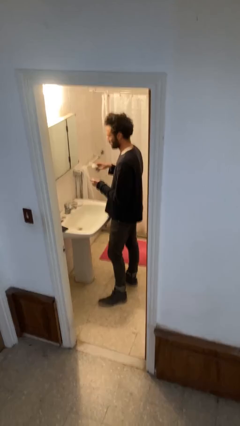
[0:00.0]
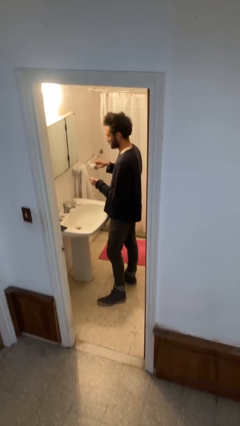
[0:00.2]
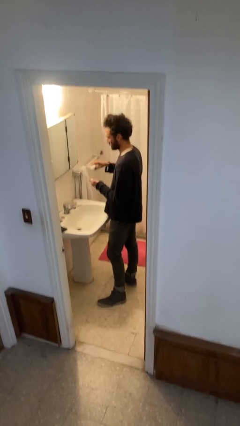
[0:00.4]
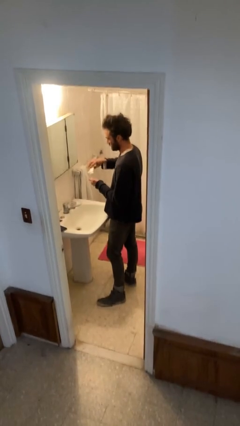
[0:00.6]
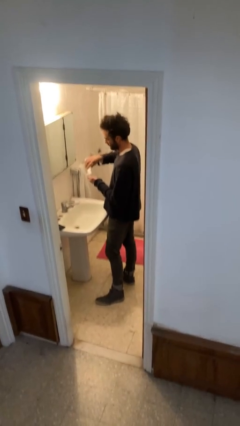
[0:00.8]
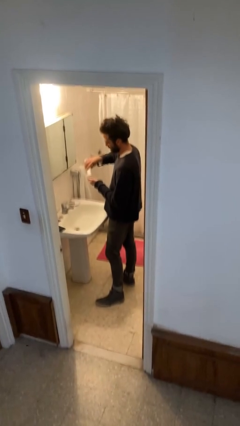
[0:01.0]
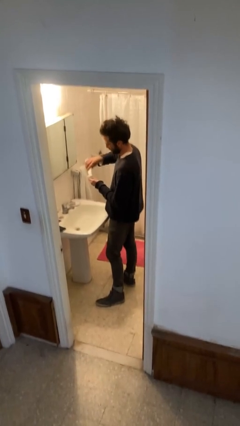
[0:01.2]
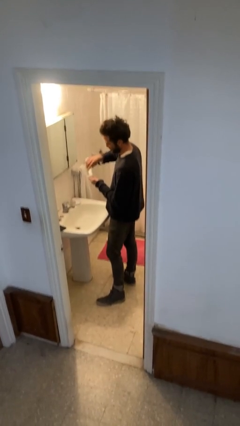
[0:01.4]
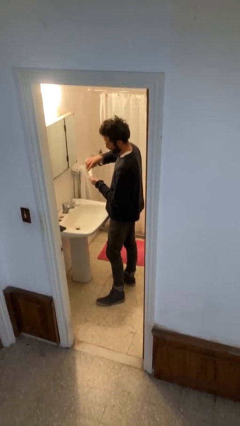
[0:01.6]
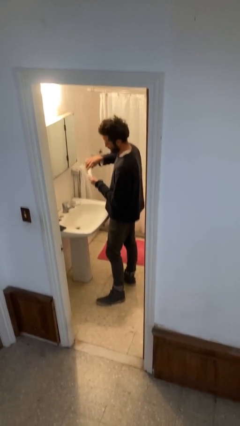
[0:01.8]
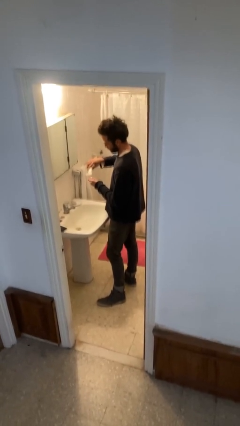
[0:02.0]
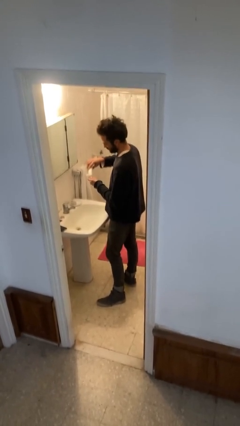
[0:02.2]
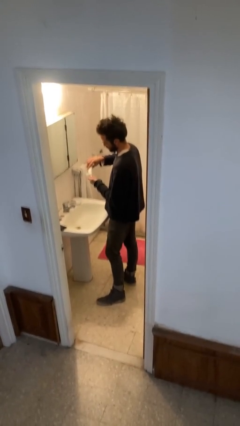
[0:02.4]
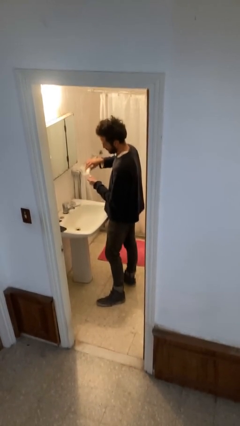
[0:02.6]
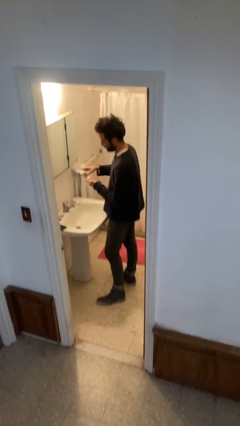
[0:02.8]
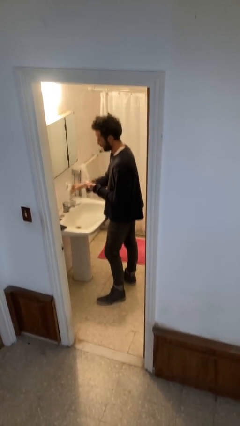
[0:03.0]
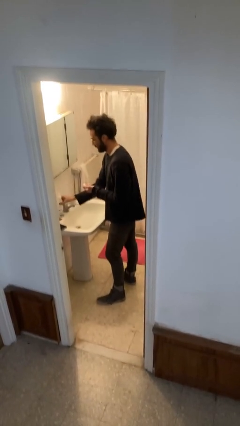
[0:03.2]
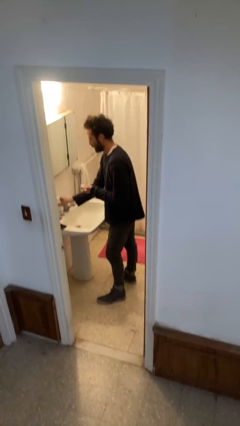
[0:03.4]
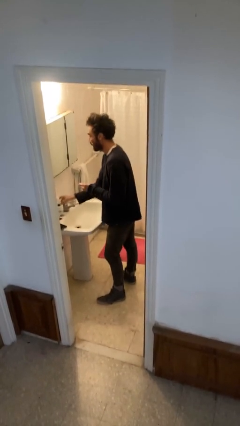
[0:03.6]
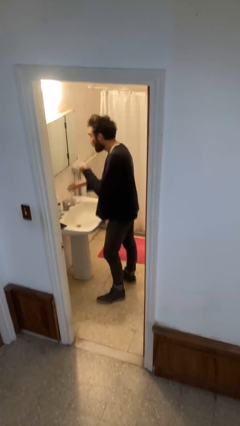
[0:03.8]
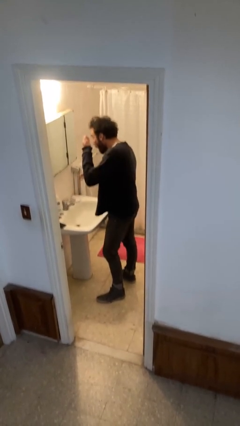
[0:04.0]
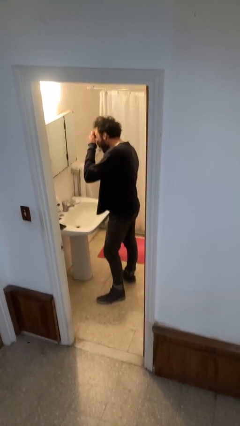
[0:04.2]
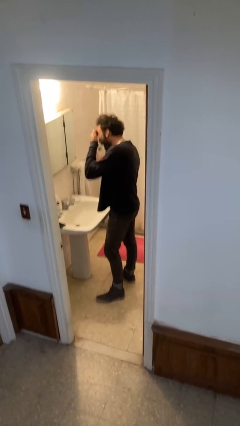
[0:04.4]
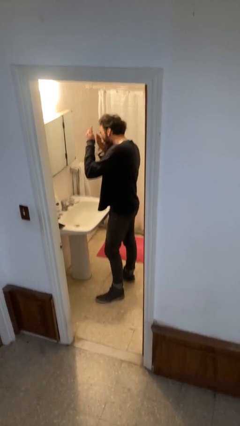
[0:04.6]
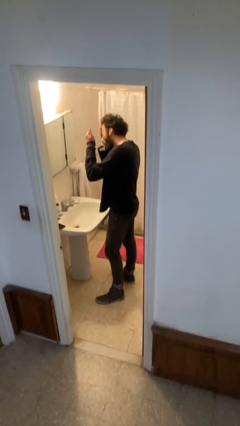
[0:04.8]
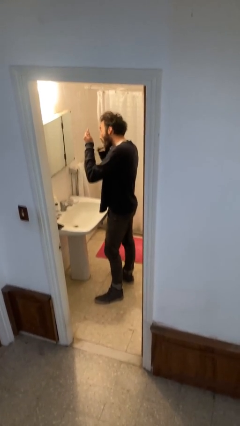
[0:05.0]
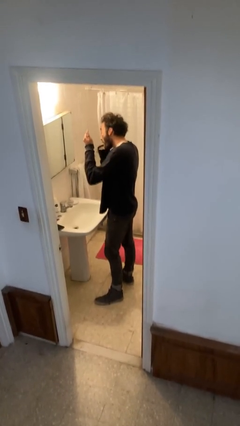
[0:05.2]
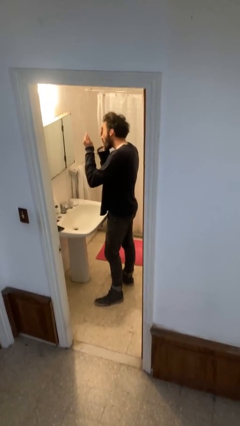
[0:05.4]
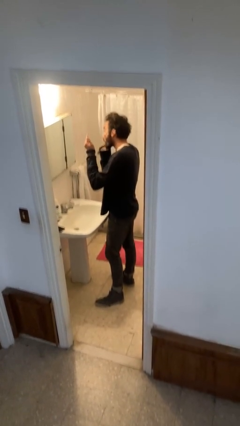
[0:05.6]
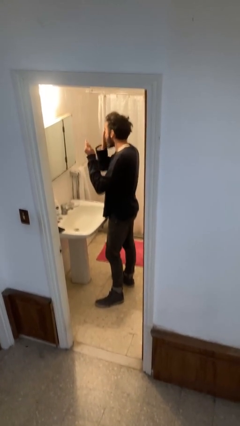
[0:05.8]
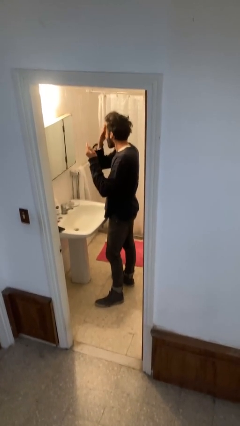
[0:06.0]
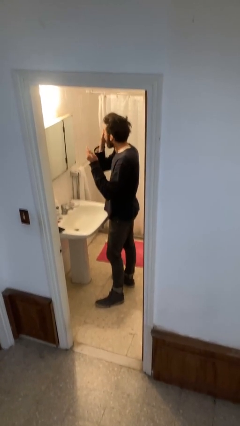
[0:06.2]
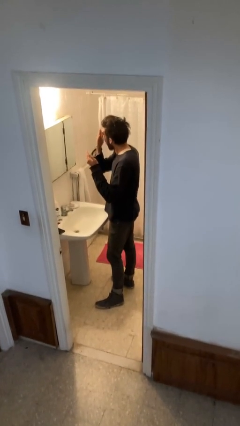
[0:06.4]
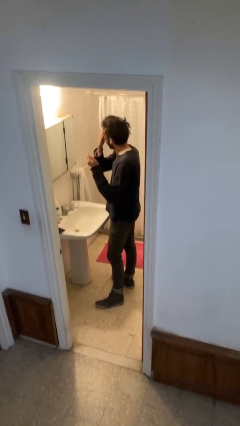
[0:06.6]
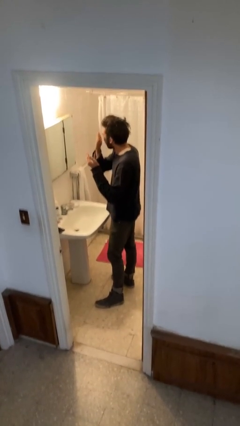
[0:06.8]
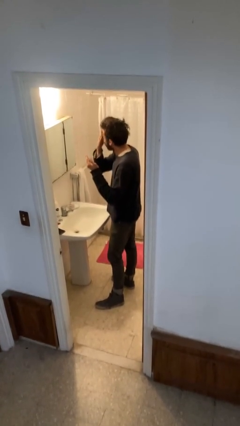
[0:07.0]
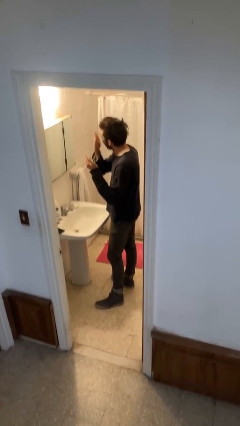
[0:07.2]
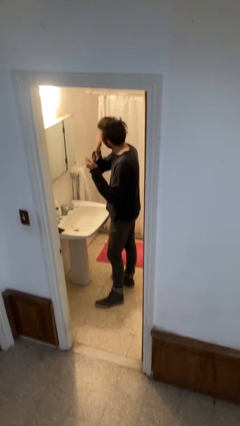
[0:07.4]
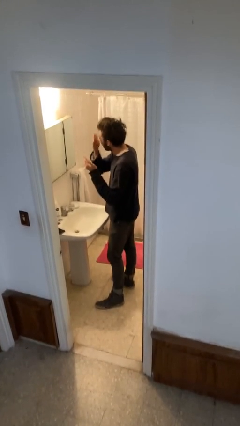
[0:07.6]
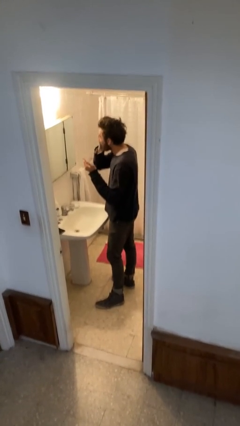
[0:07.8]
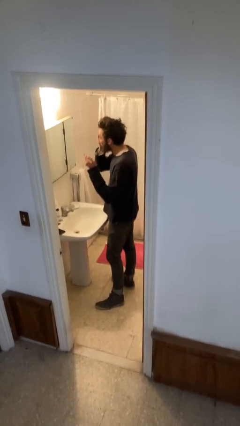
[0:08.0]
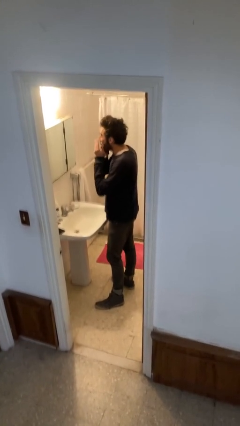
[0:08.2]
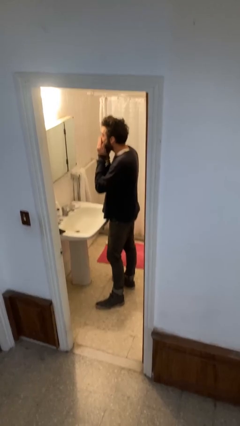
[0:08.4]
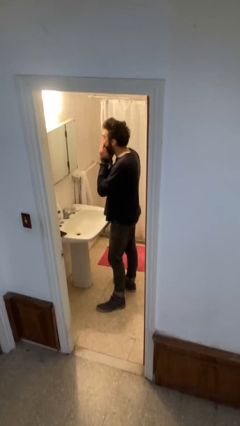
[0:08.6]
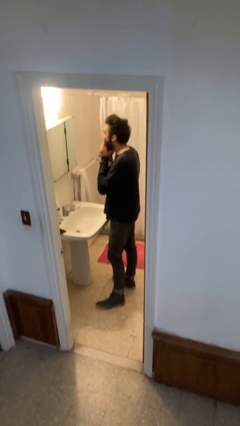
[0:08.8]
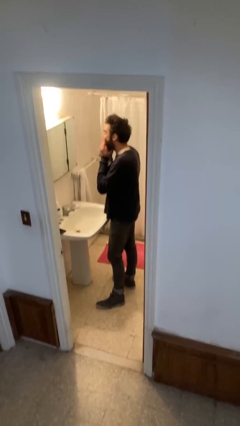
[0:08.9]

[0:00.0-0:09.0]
person applies facial moisturizer

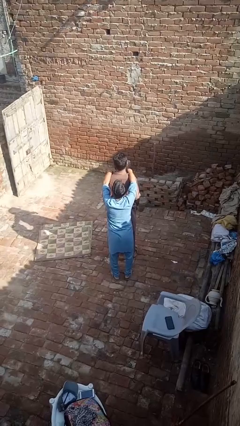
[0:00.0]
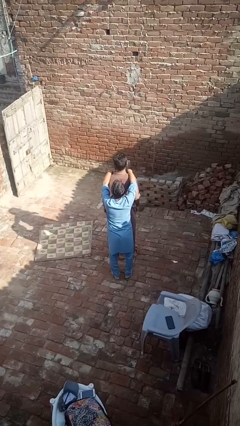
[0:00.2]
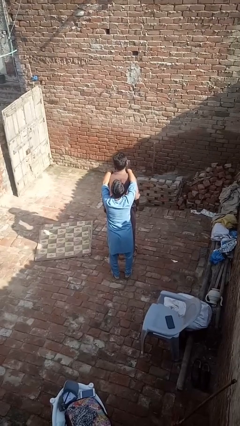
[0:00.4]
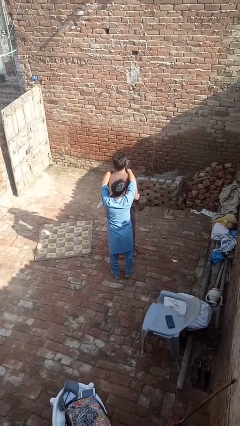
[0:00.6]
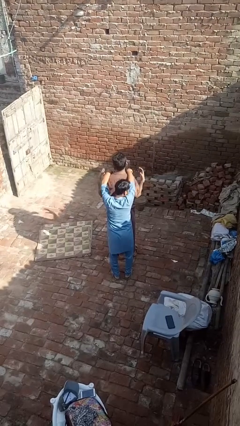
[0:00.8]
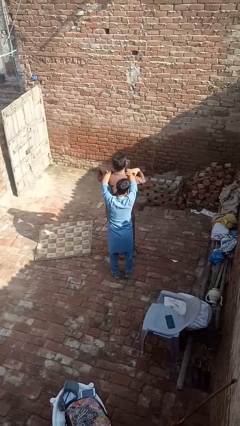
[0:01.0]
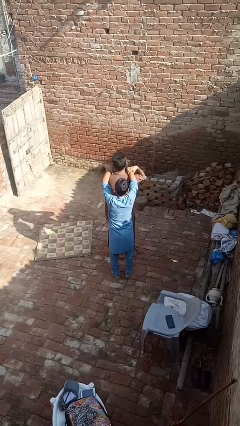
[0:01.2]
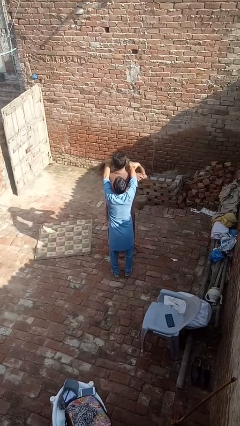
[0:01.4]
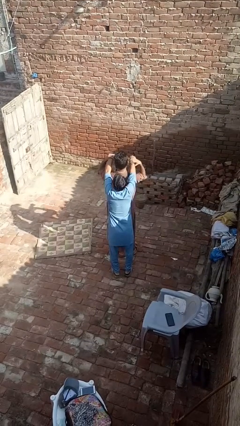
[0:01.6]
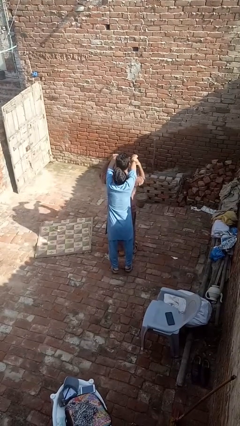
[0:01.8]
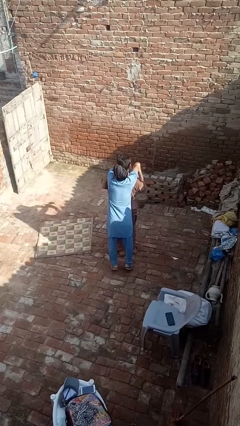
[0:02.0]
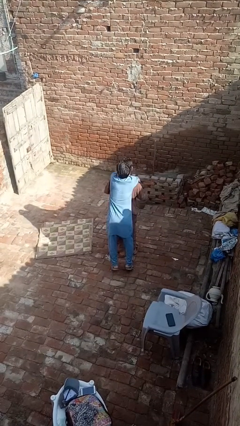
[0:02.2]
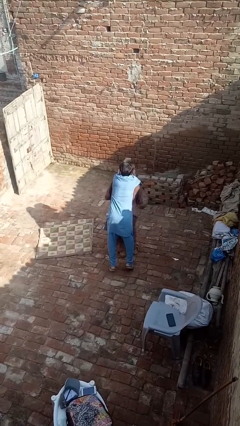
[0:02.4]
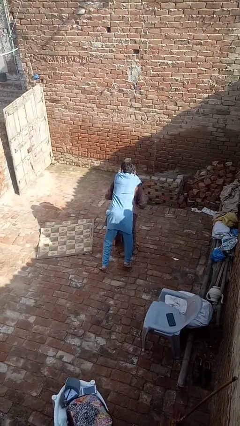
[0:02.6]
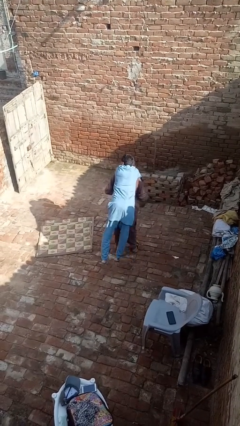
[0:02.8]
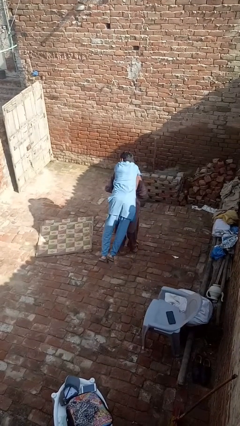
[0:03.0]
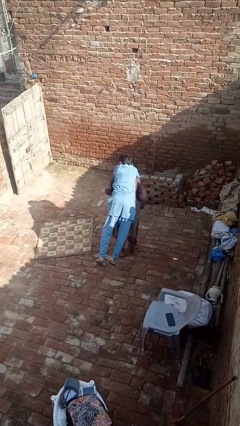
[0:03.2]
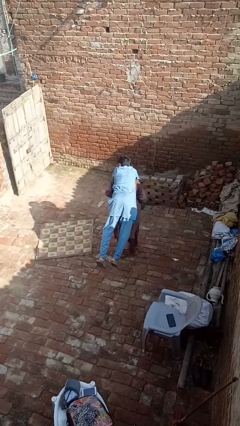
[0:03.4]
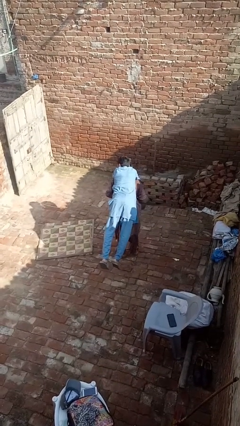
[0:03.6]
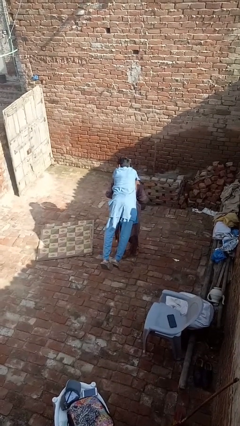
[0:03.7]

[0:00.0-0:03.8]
person carries person over shoulder

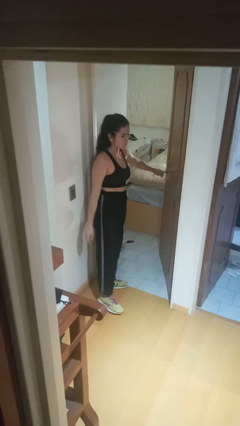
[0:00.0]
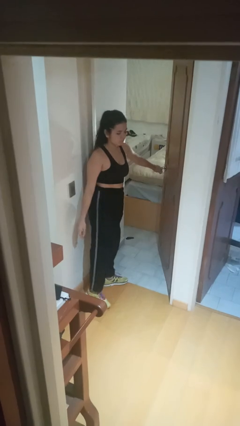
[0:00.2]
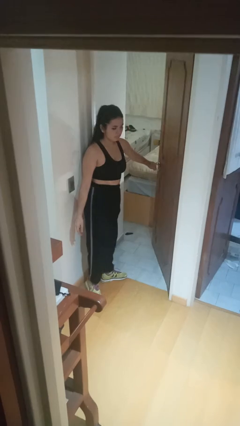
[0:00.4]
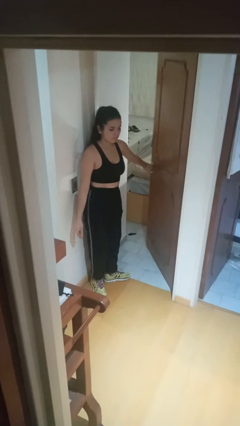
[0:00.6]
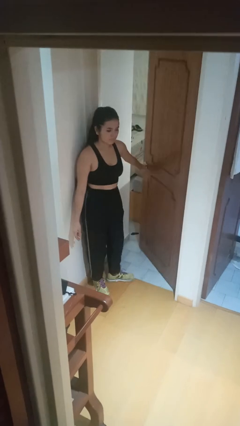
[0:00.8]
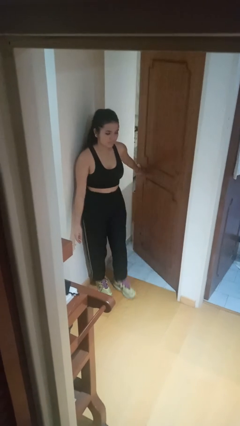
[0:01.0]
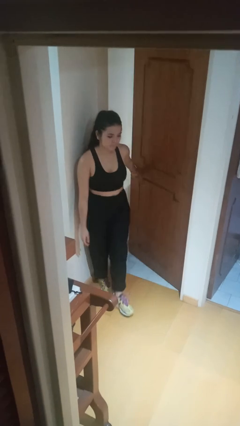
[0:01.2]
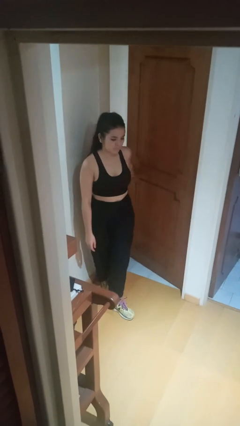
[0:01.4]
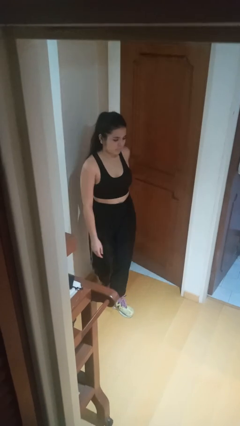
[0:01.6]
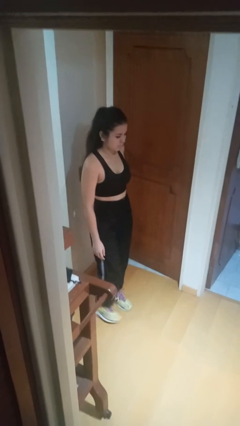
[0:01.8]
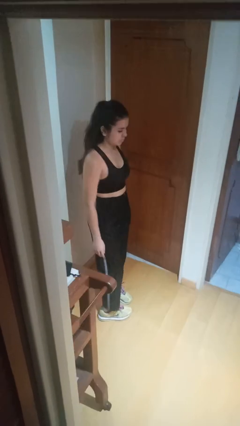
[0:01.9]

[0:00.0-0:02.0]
person closes facility door

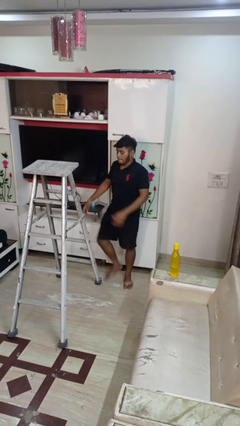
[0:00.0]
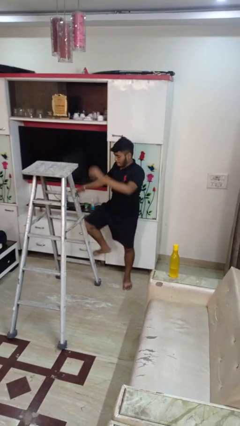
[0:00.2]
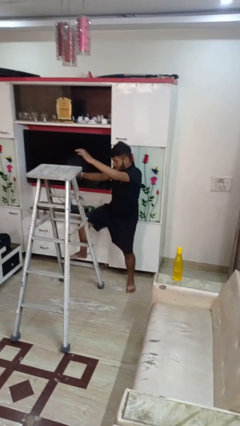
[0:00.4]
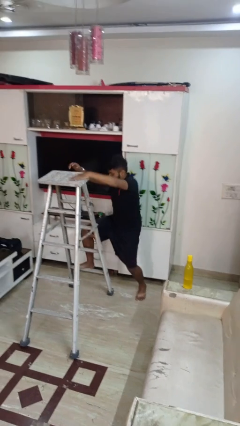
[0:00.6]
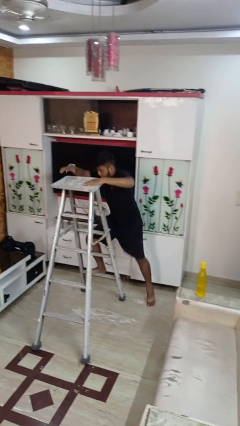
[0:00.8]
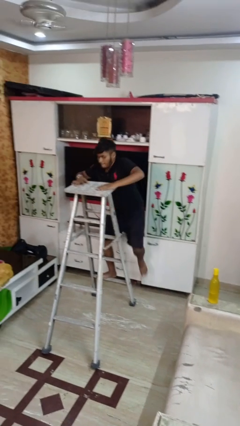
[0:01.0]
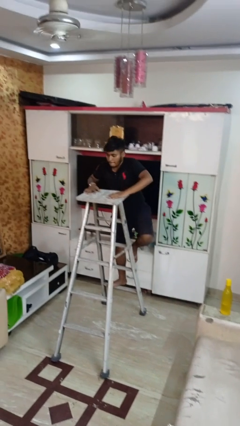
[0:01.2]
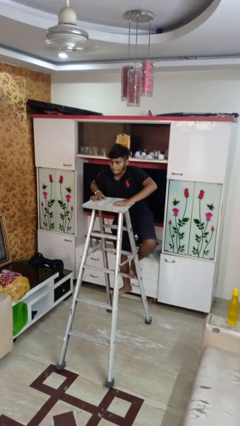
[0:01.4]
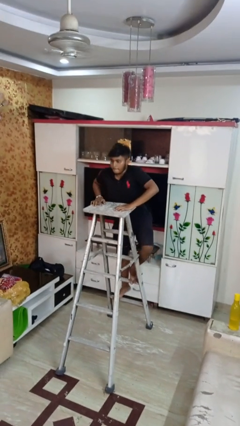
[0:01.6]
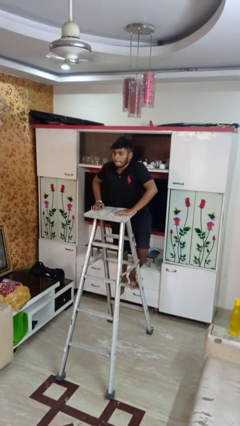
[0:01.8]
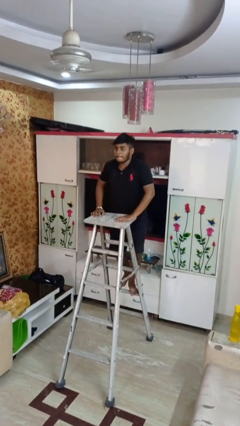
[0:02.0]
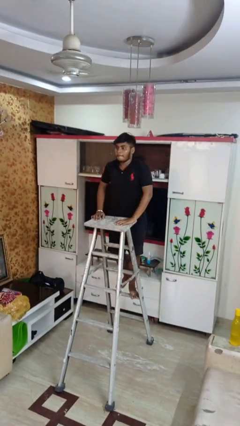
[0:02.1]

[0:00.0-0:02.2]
person climbs up ladder

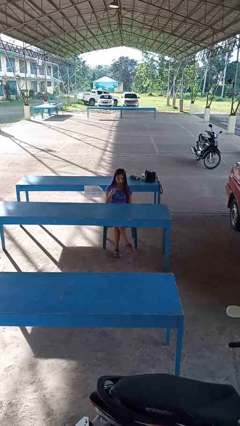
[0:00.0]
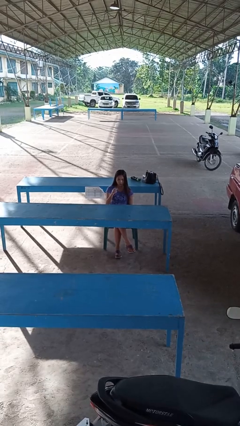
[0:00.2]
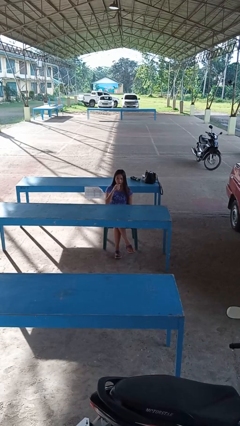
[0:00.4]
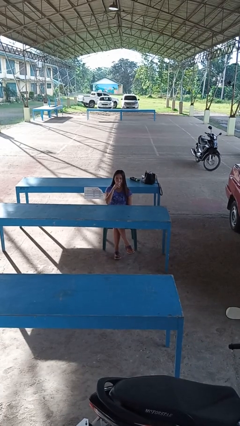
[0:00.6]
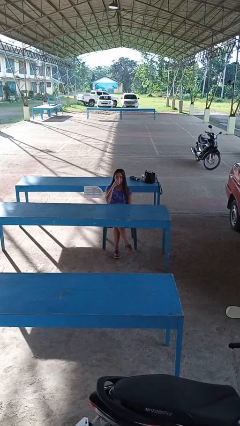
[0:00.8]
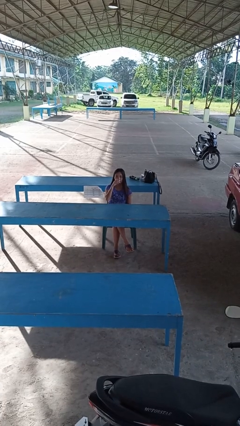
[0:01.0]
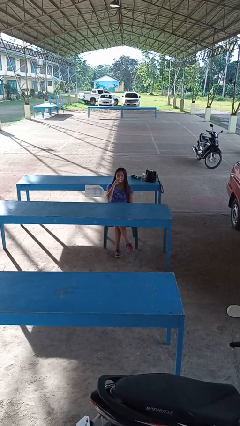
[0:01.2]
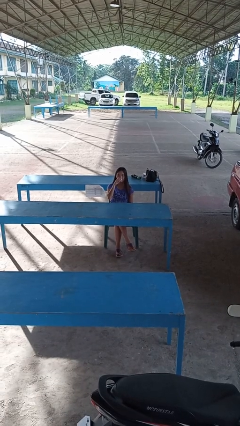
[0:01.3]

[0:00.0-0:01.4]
person drinks from shotglass
